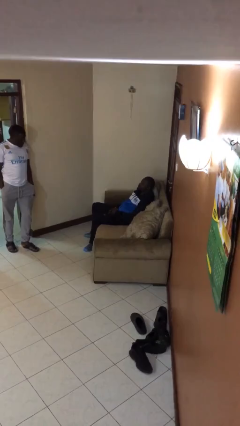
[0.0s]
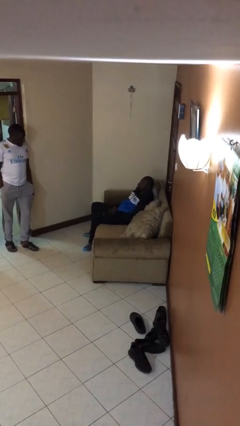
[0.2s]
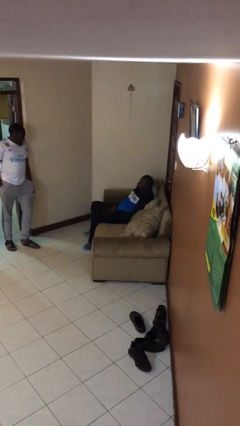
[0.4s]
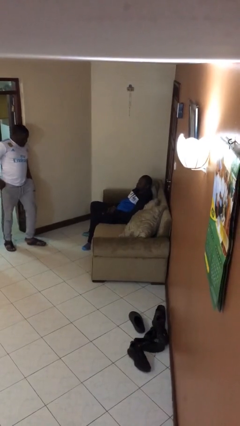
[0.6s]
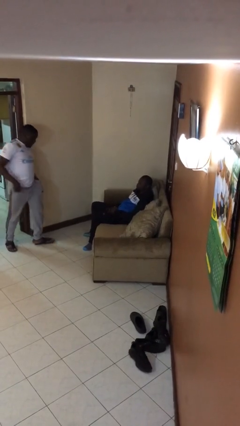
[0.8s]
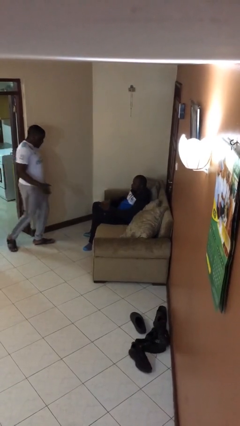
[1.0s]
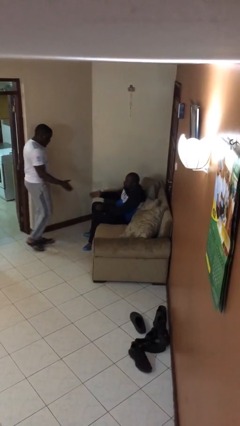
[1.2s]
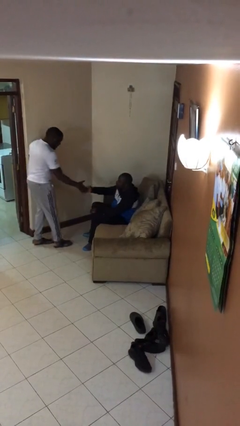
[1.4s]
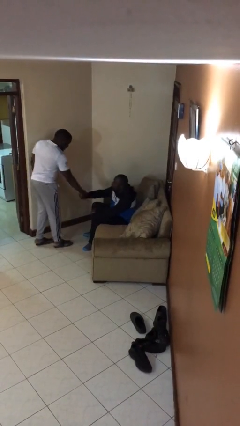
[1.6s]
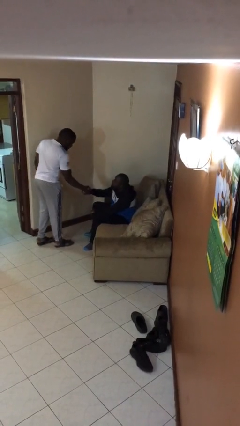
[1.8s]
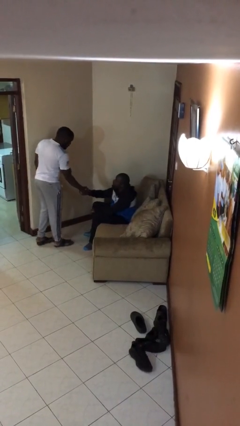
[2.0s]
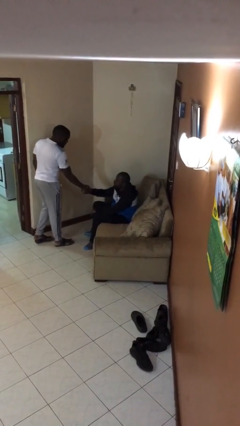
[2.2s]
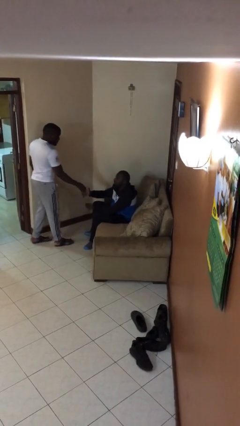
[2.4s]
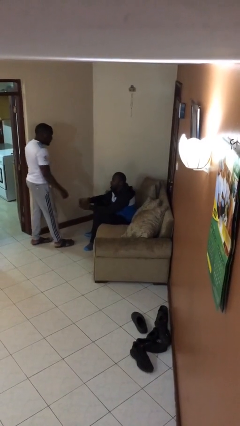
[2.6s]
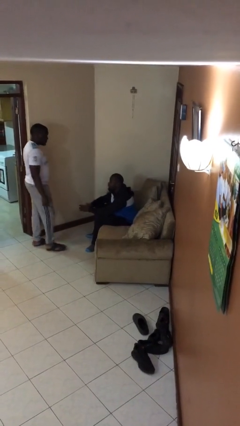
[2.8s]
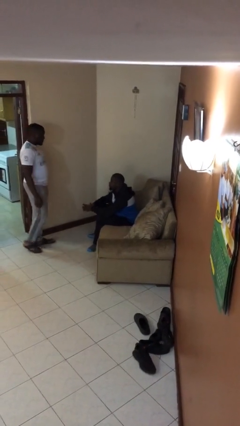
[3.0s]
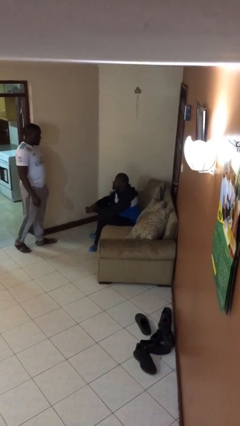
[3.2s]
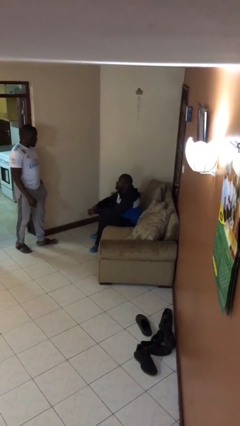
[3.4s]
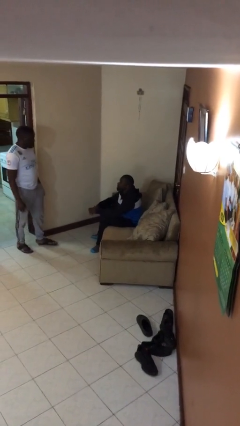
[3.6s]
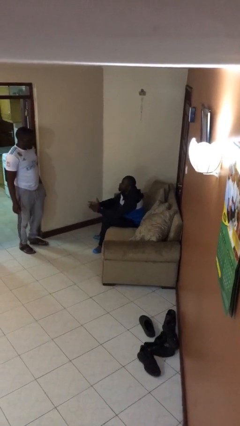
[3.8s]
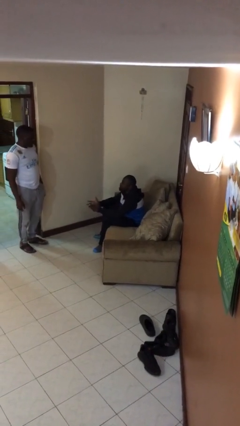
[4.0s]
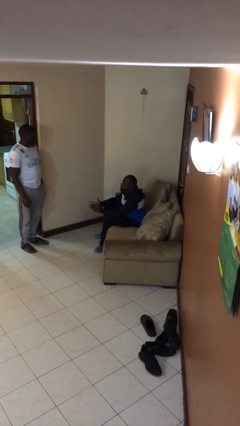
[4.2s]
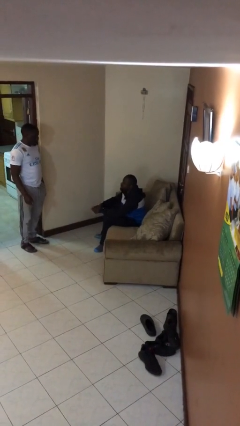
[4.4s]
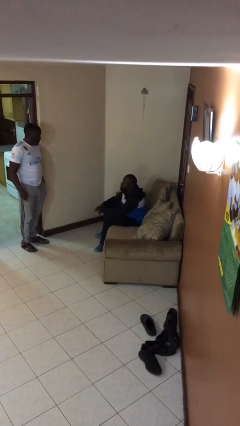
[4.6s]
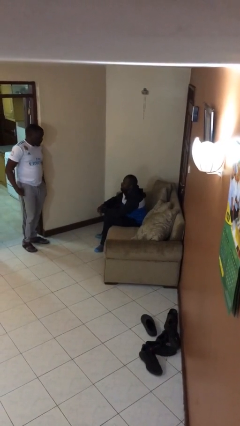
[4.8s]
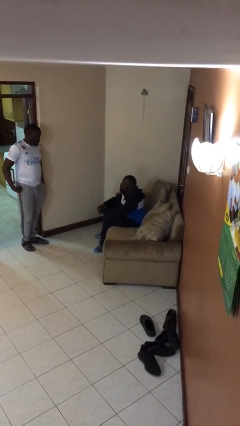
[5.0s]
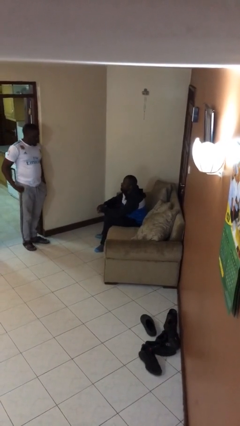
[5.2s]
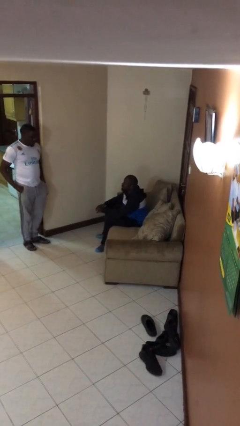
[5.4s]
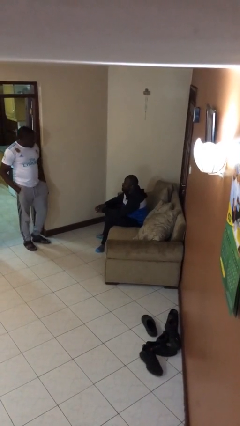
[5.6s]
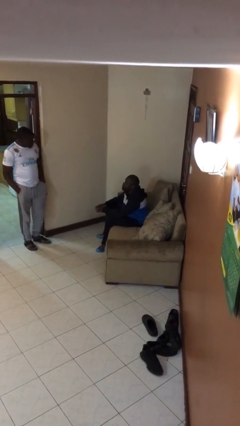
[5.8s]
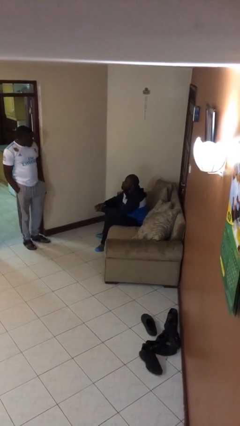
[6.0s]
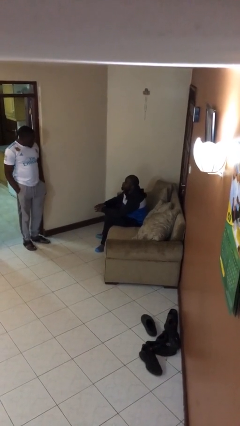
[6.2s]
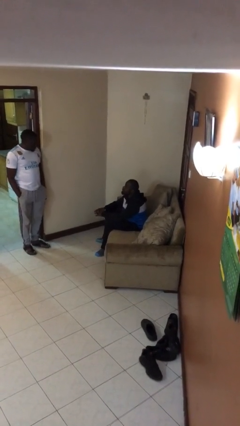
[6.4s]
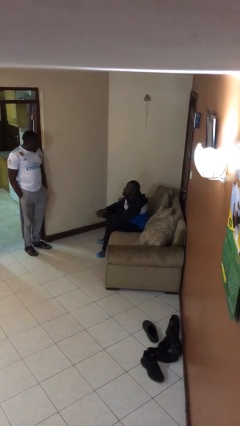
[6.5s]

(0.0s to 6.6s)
person shakes hand

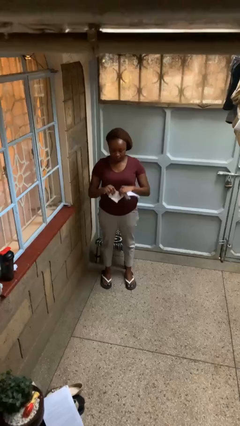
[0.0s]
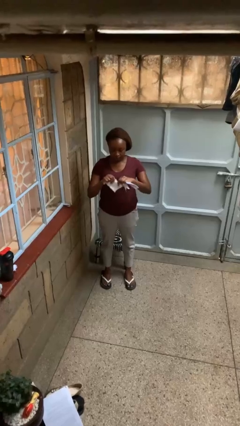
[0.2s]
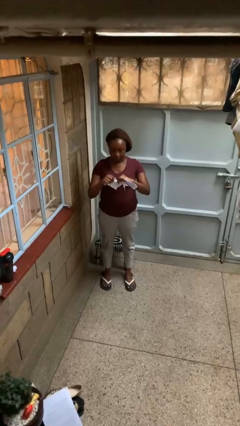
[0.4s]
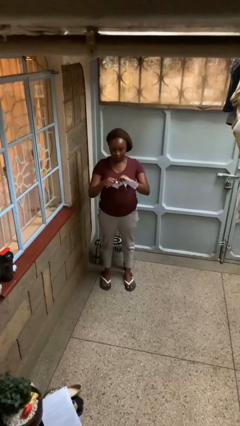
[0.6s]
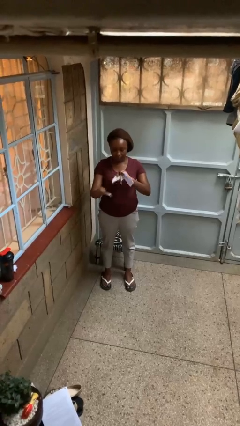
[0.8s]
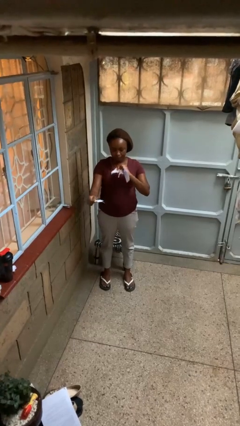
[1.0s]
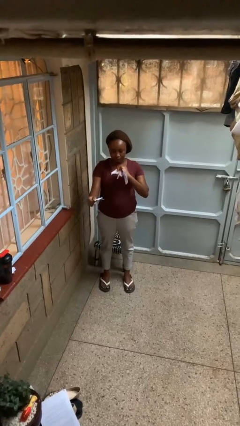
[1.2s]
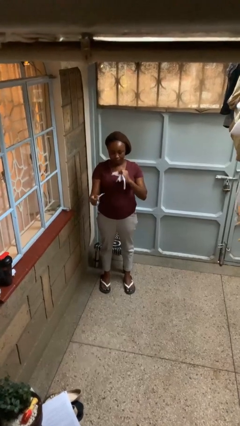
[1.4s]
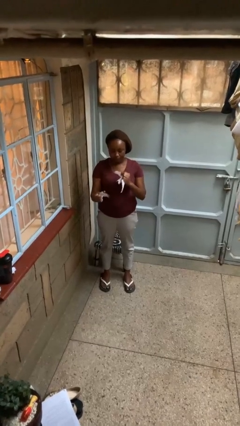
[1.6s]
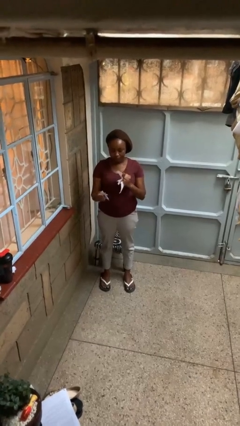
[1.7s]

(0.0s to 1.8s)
person tears paper

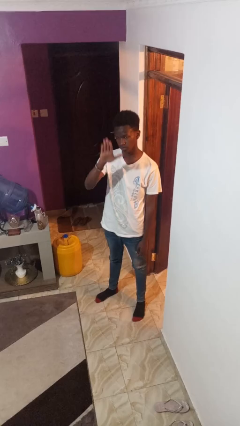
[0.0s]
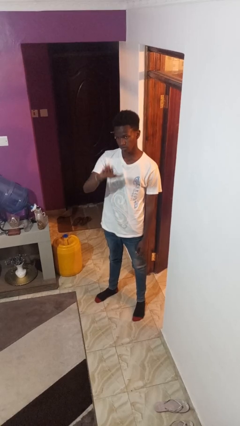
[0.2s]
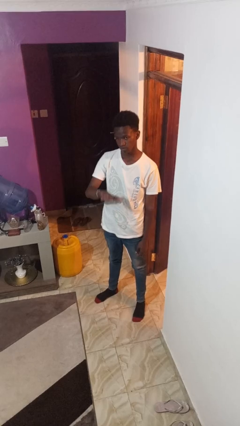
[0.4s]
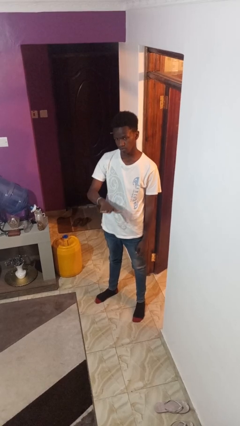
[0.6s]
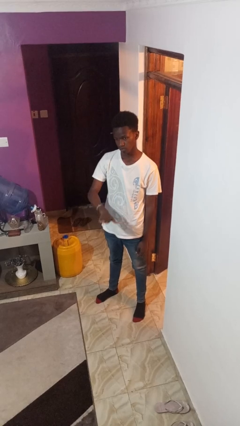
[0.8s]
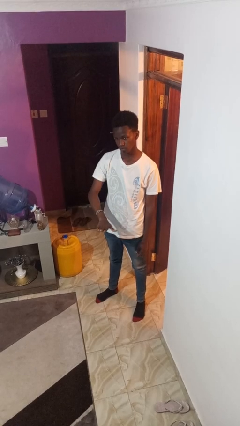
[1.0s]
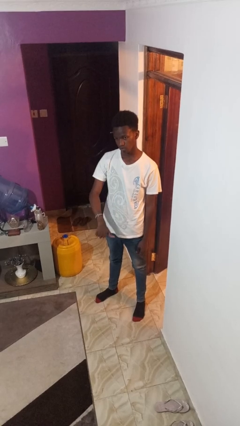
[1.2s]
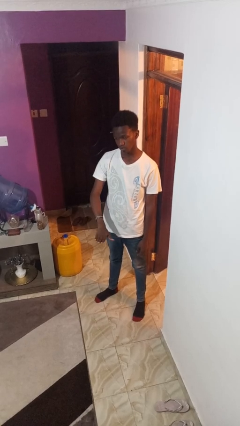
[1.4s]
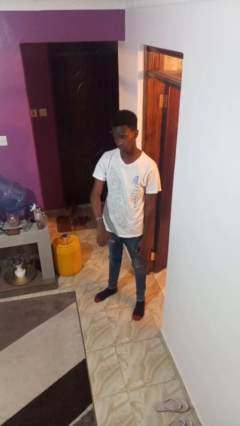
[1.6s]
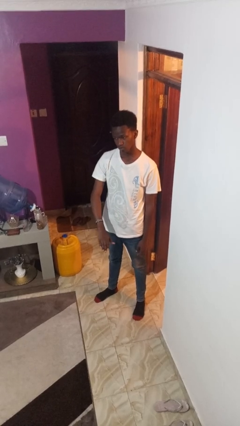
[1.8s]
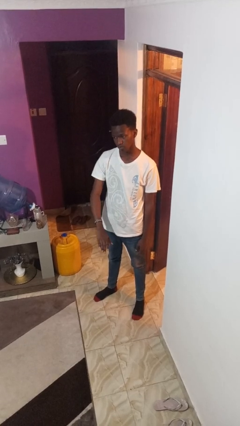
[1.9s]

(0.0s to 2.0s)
person gestures swipe down

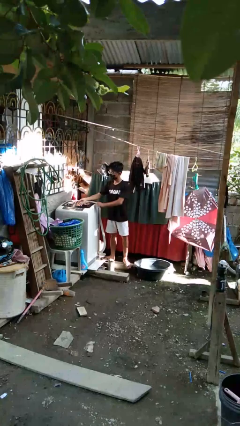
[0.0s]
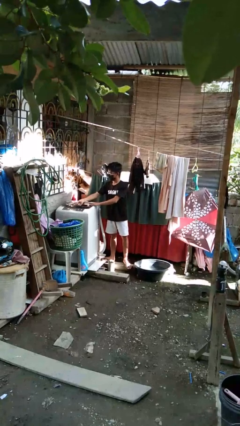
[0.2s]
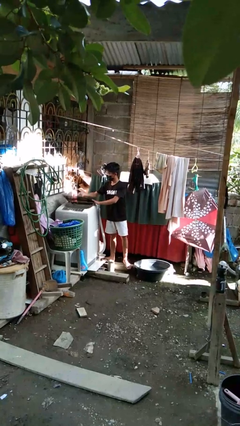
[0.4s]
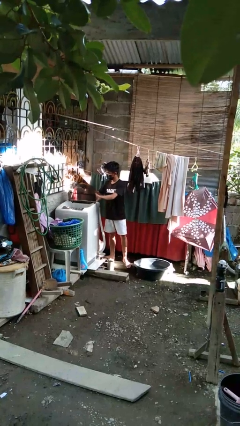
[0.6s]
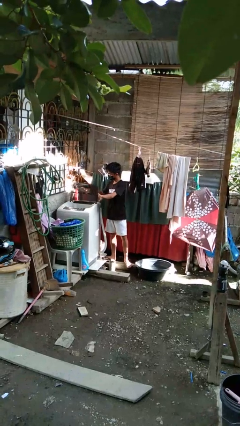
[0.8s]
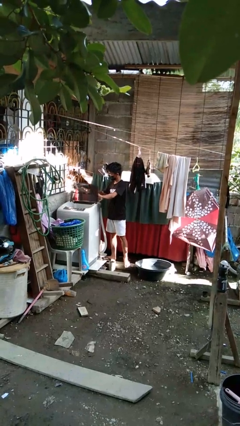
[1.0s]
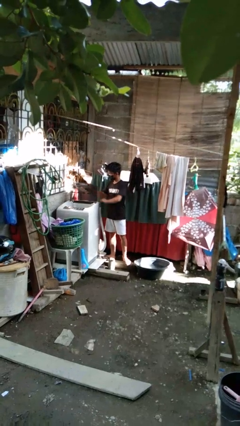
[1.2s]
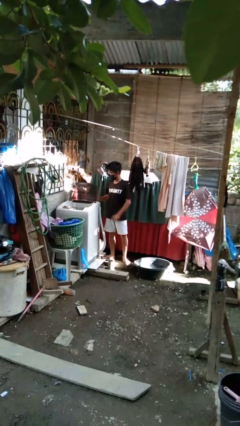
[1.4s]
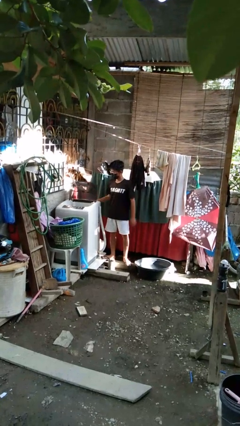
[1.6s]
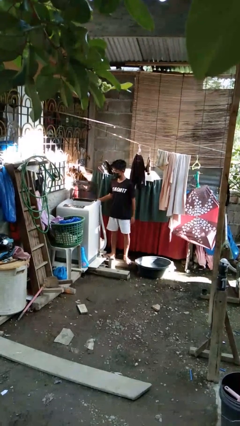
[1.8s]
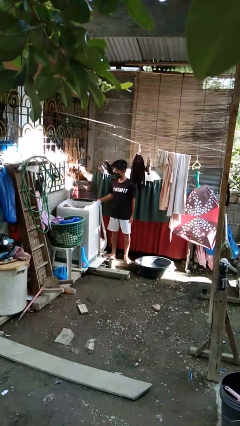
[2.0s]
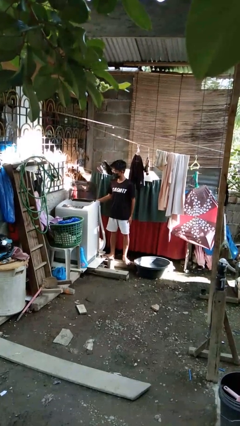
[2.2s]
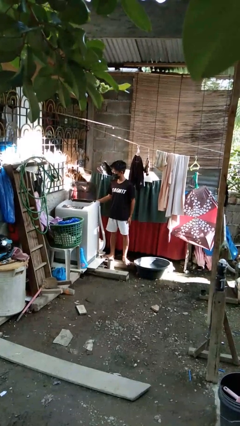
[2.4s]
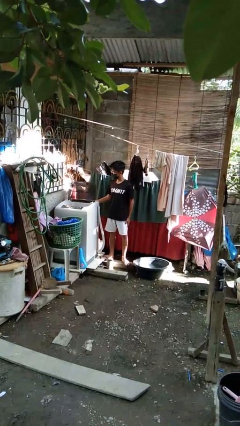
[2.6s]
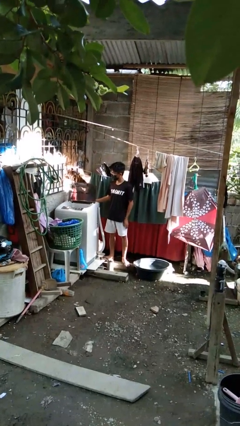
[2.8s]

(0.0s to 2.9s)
person opens clothes washer

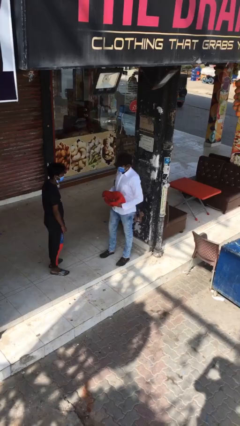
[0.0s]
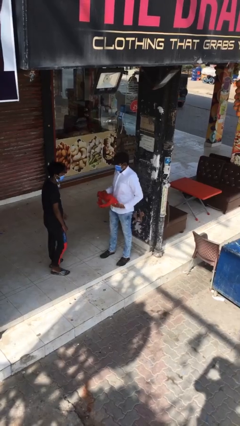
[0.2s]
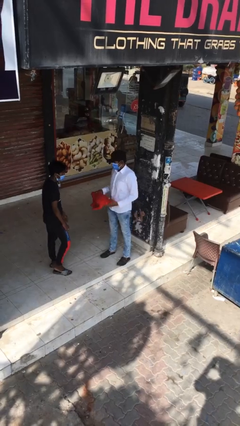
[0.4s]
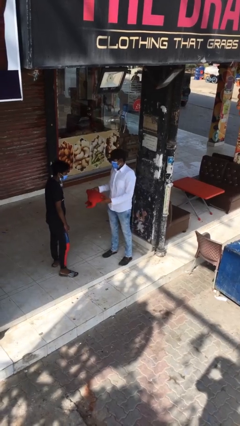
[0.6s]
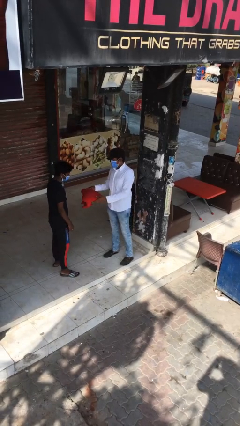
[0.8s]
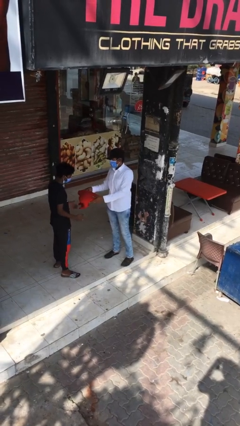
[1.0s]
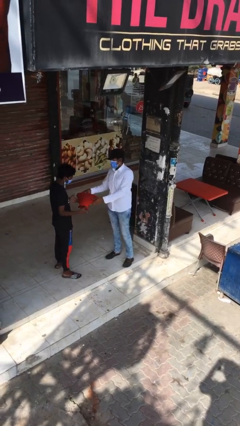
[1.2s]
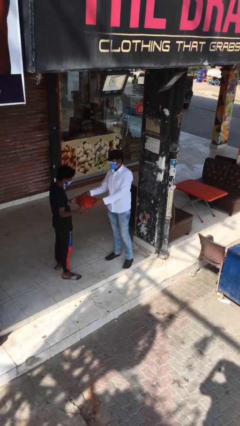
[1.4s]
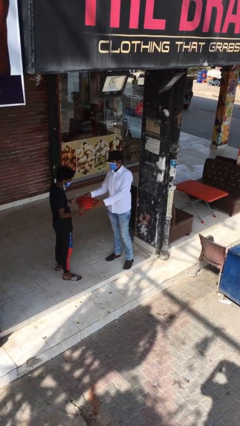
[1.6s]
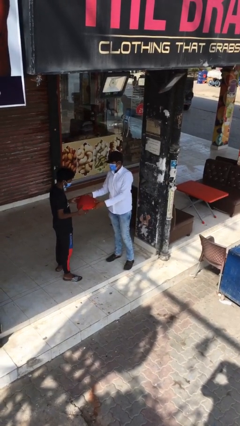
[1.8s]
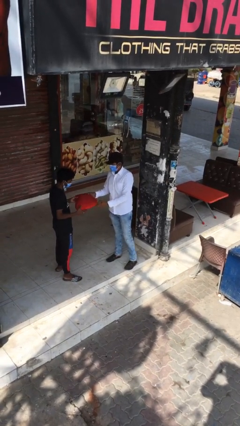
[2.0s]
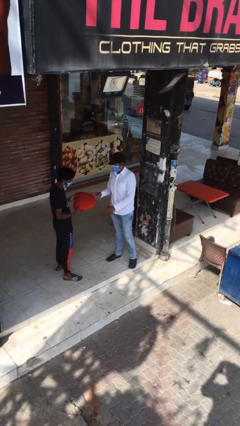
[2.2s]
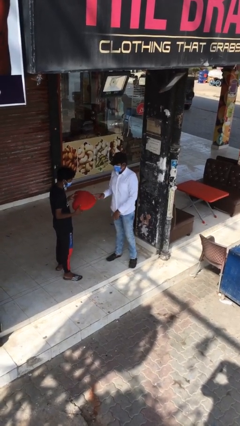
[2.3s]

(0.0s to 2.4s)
person transfers object to person

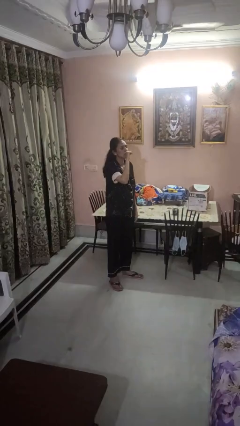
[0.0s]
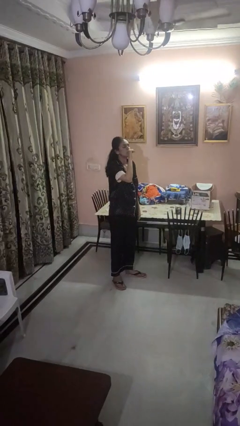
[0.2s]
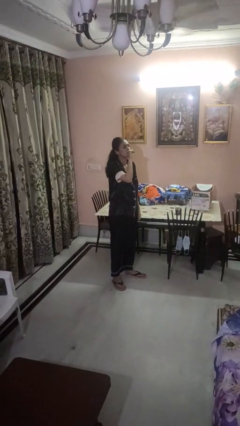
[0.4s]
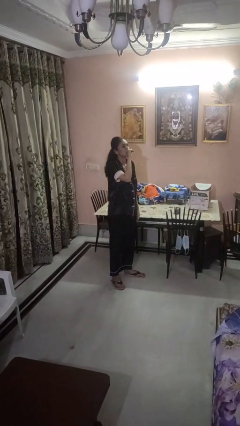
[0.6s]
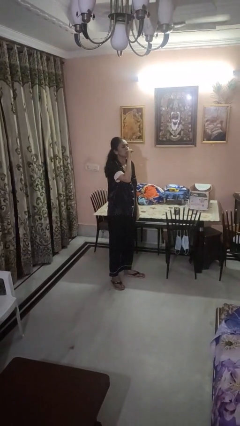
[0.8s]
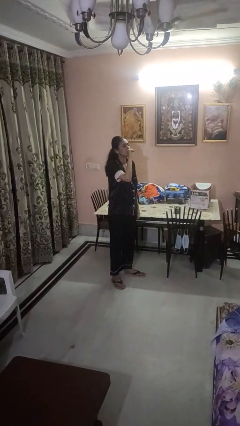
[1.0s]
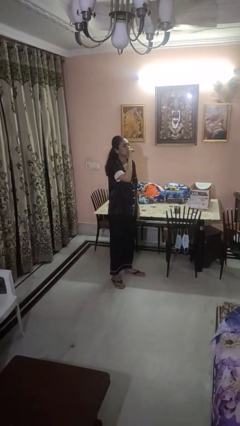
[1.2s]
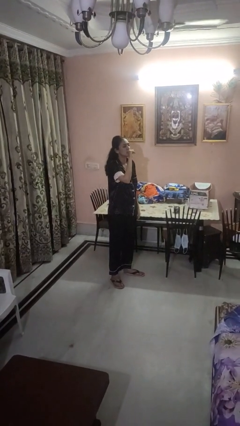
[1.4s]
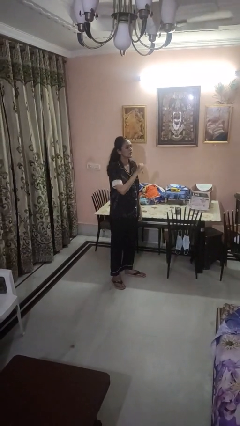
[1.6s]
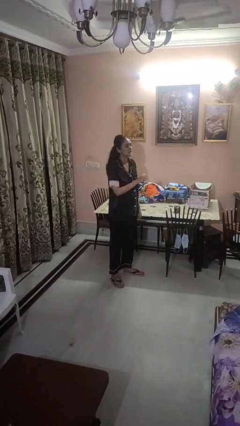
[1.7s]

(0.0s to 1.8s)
person vapes

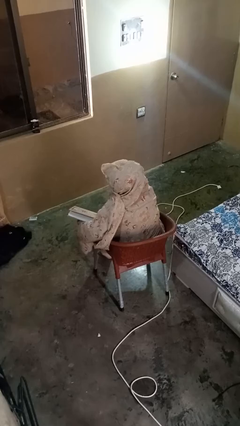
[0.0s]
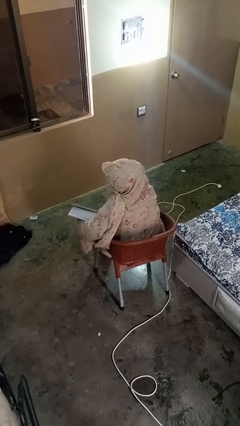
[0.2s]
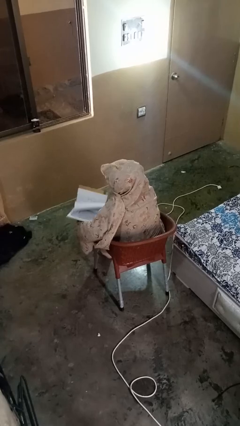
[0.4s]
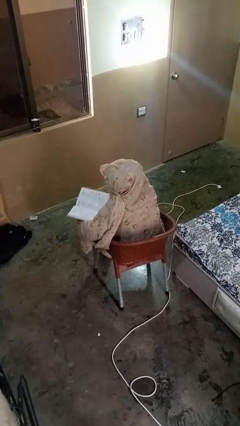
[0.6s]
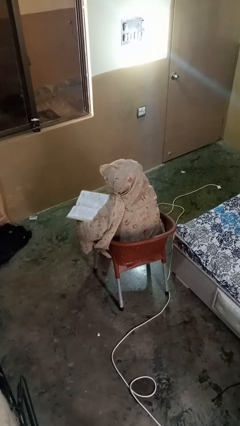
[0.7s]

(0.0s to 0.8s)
person reads book
